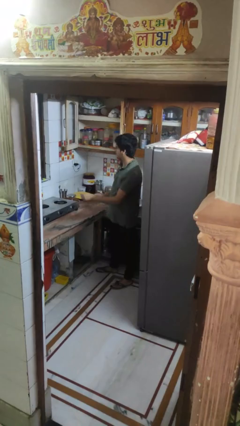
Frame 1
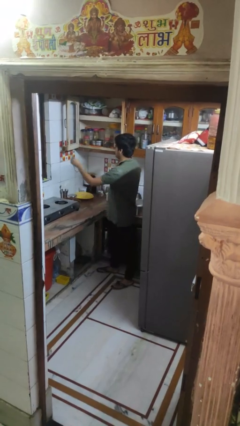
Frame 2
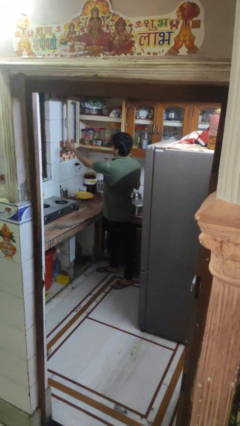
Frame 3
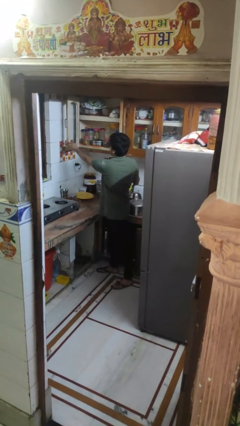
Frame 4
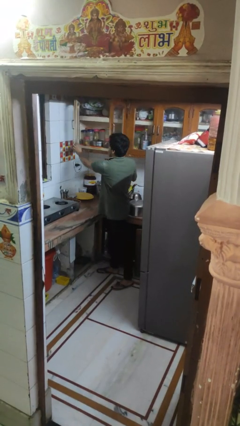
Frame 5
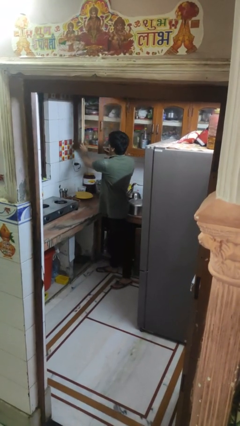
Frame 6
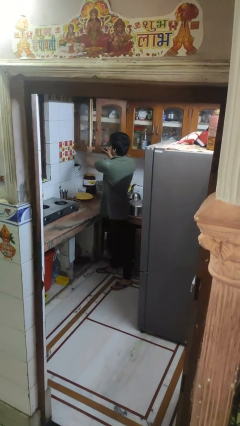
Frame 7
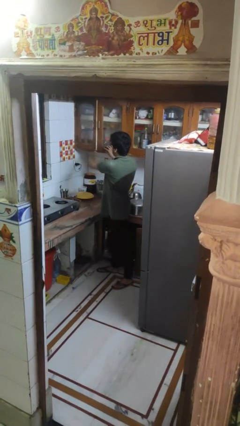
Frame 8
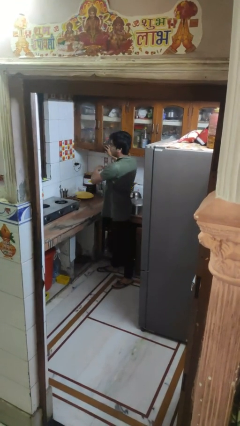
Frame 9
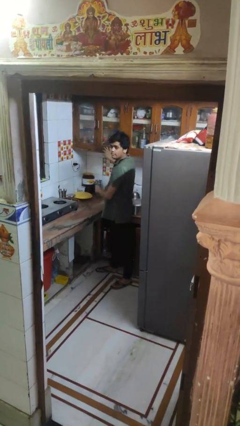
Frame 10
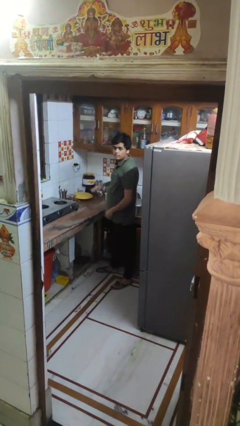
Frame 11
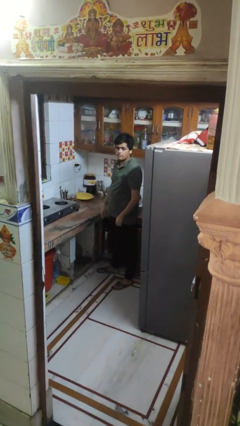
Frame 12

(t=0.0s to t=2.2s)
person closes cabinet

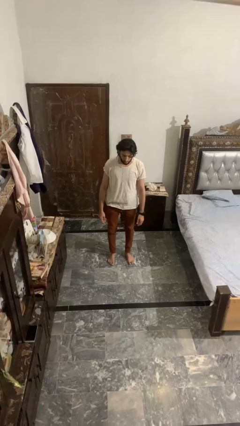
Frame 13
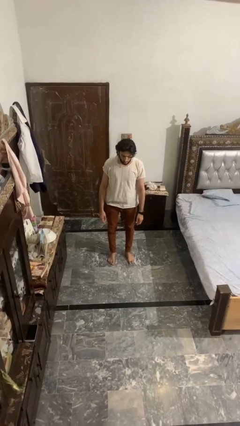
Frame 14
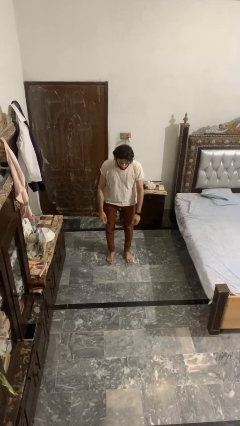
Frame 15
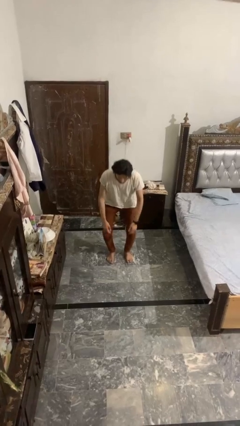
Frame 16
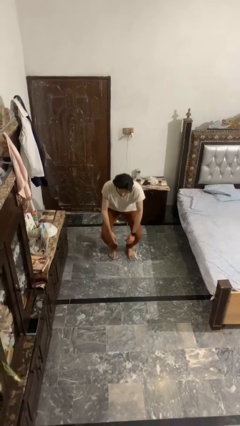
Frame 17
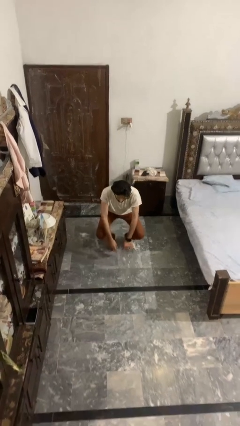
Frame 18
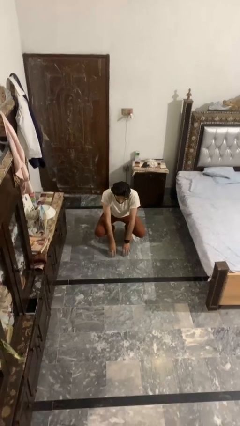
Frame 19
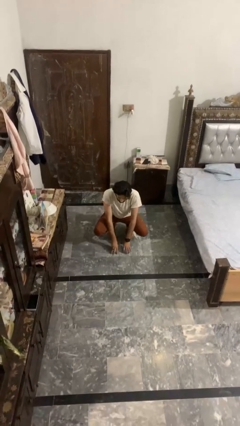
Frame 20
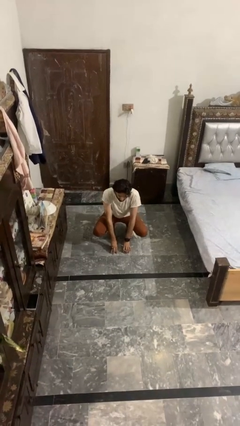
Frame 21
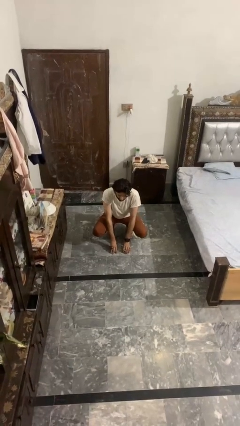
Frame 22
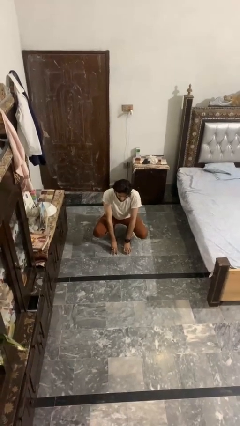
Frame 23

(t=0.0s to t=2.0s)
person squats

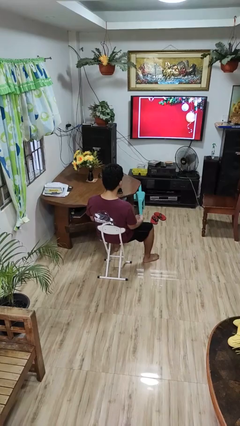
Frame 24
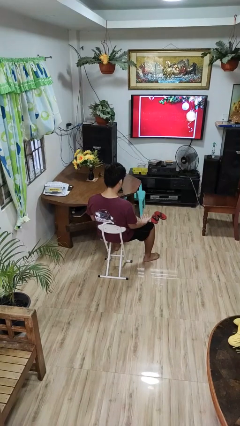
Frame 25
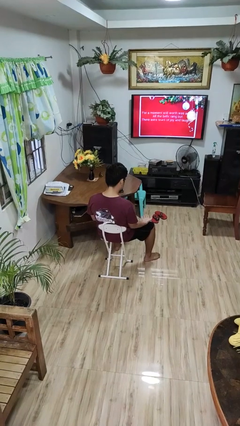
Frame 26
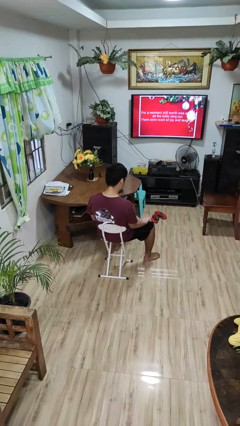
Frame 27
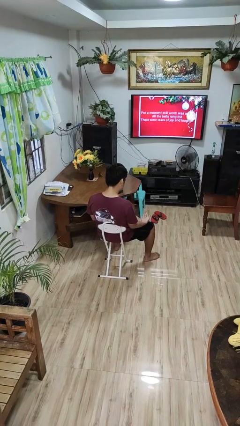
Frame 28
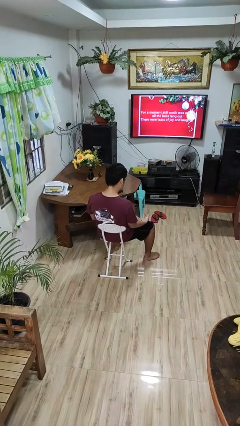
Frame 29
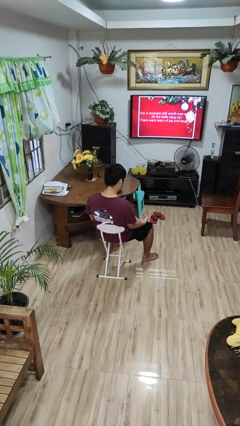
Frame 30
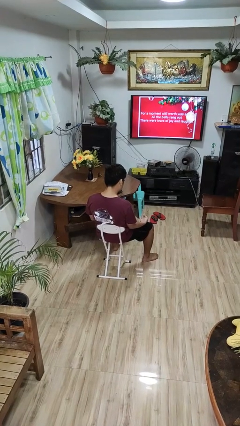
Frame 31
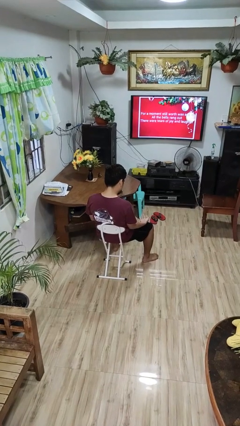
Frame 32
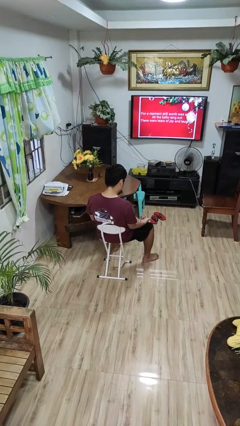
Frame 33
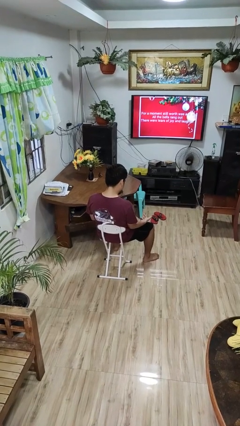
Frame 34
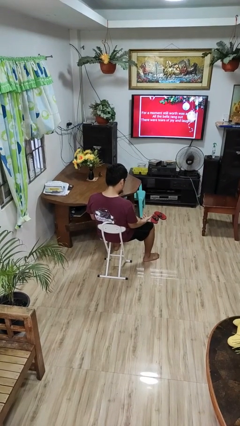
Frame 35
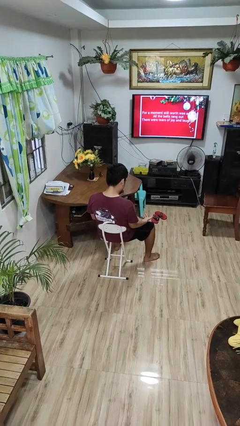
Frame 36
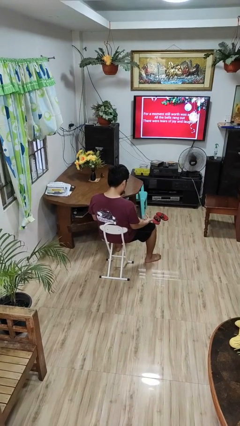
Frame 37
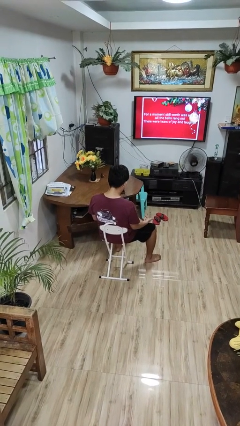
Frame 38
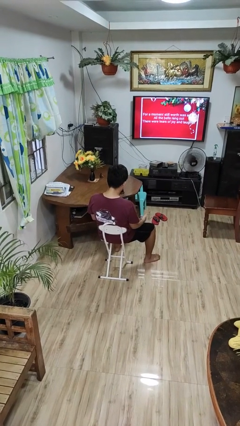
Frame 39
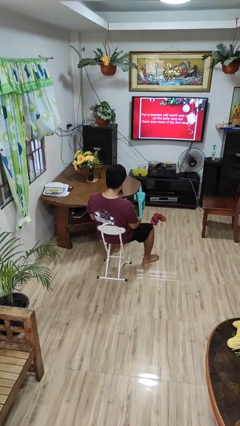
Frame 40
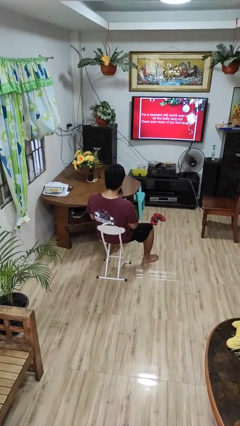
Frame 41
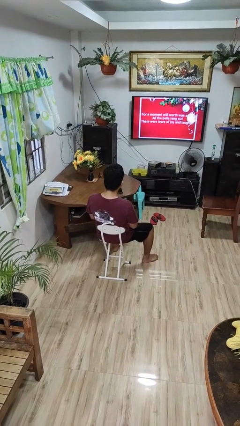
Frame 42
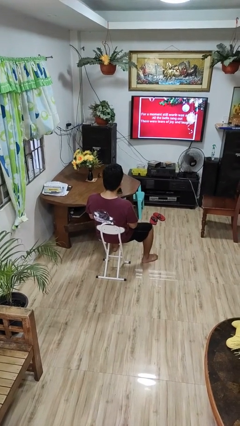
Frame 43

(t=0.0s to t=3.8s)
person looks at hands in lap

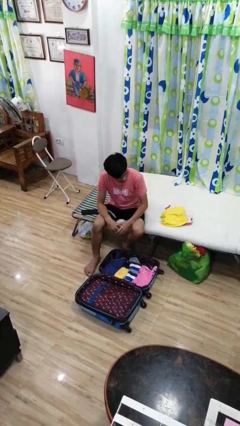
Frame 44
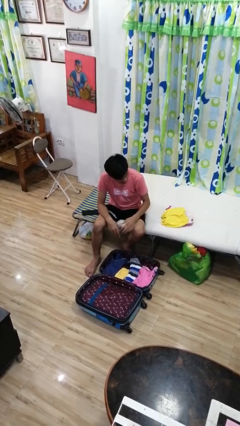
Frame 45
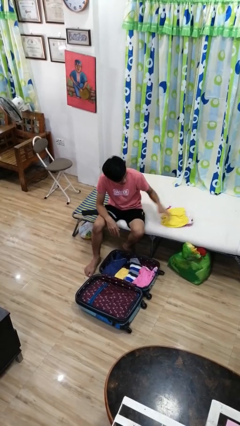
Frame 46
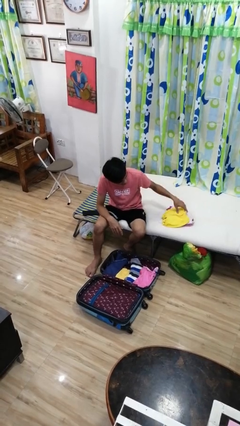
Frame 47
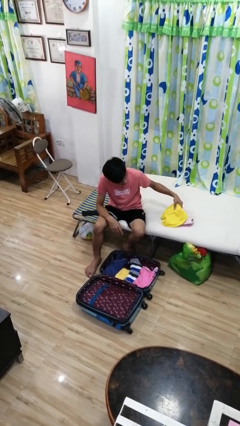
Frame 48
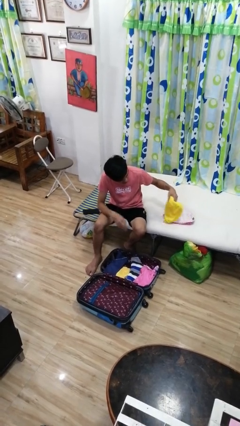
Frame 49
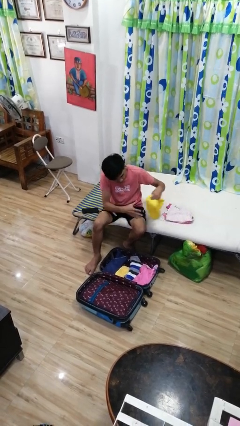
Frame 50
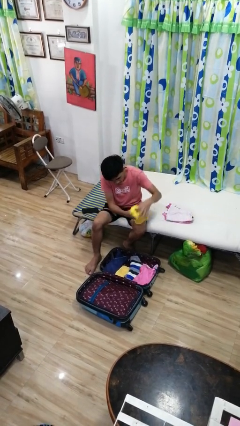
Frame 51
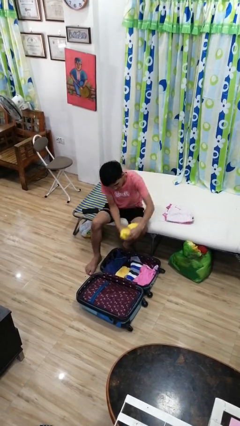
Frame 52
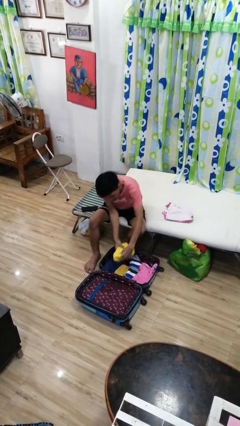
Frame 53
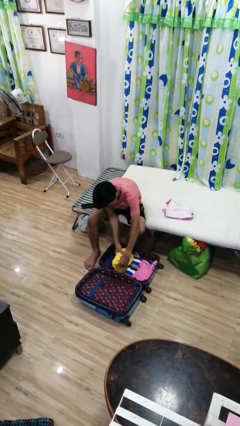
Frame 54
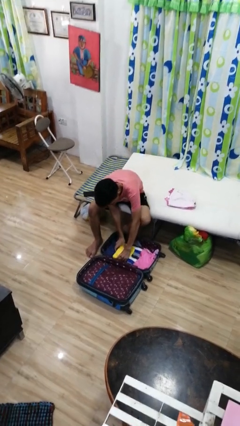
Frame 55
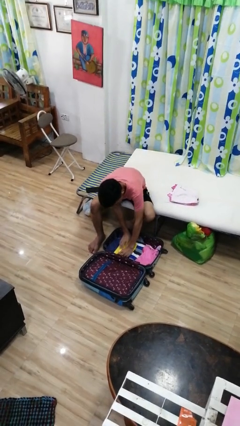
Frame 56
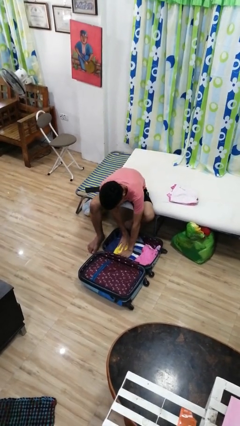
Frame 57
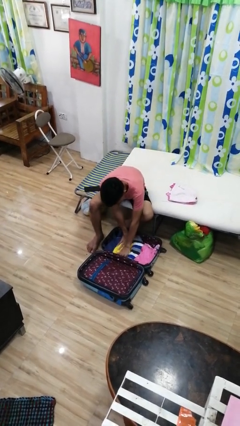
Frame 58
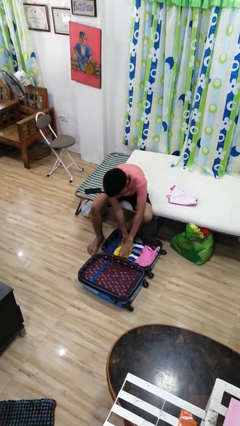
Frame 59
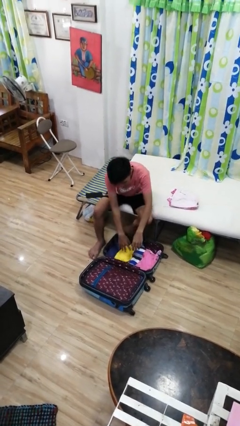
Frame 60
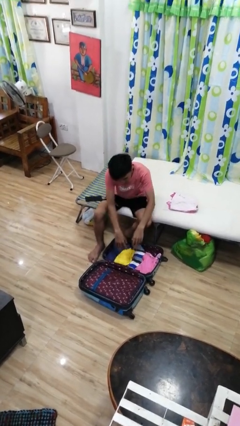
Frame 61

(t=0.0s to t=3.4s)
person loads clothes into suitcase

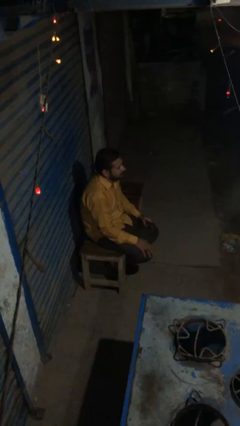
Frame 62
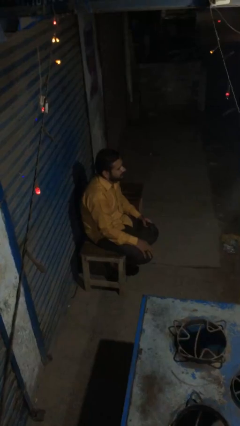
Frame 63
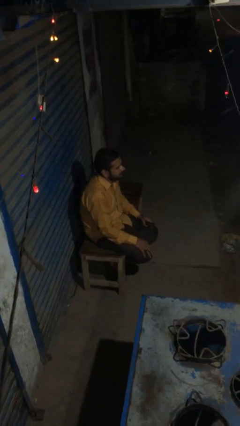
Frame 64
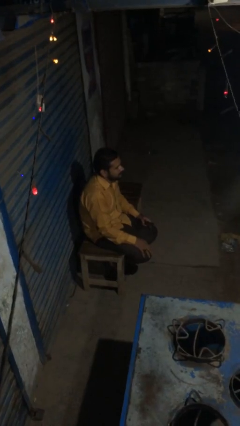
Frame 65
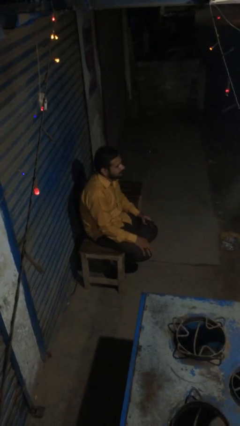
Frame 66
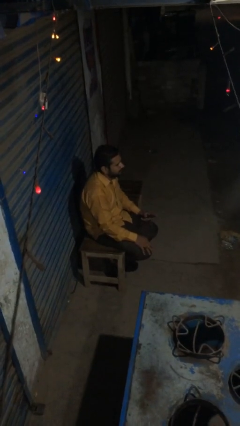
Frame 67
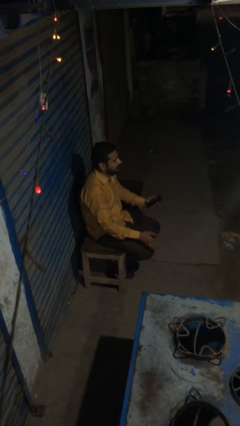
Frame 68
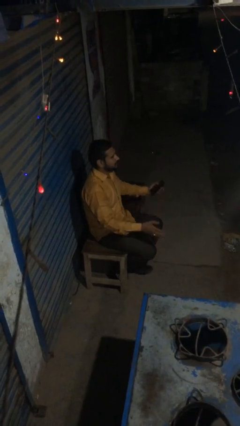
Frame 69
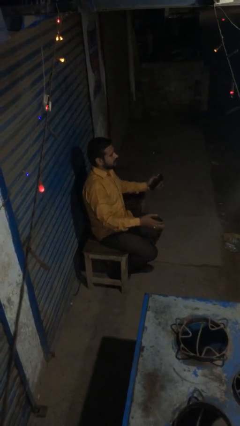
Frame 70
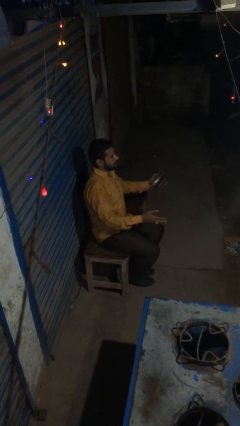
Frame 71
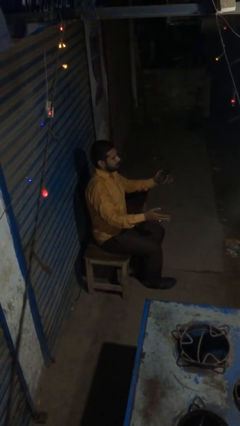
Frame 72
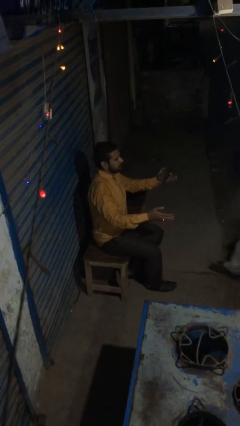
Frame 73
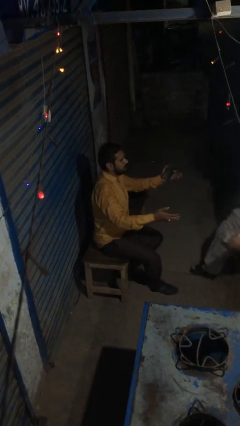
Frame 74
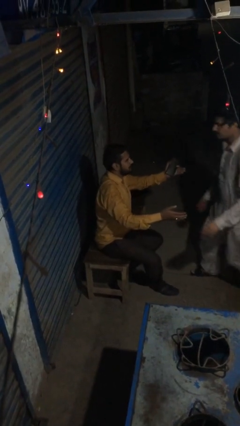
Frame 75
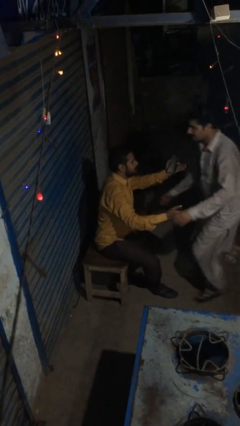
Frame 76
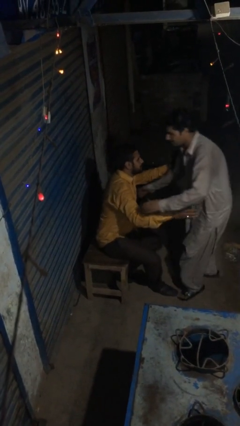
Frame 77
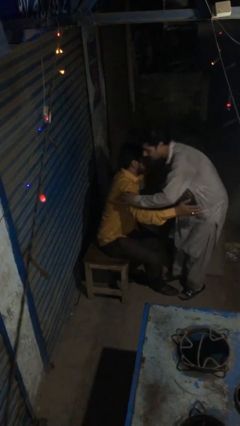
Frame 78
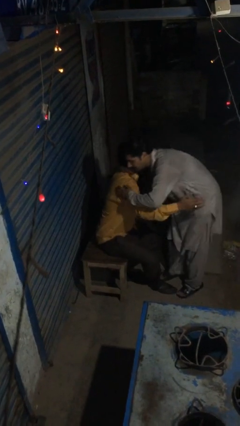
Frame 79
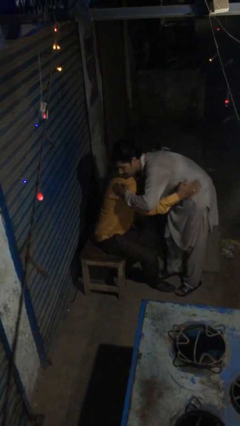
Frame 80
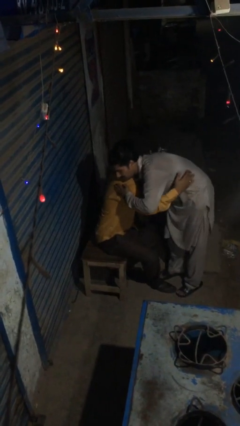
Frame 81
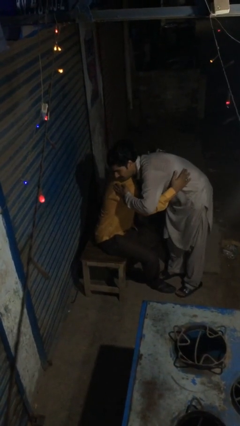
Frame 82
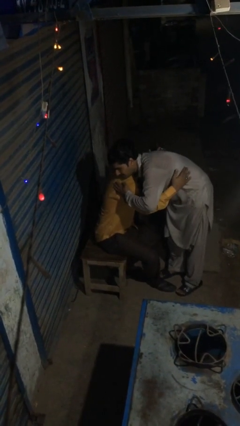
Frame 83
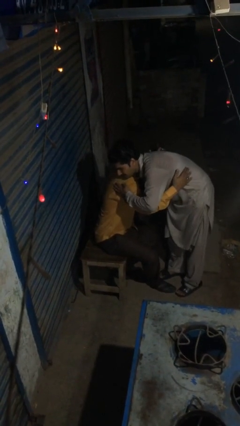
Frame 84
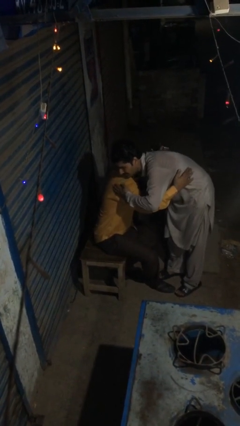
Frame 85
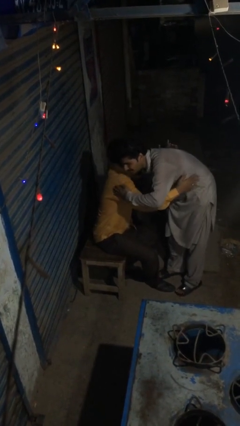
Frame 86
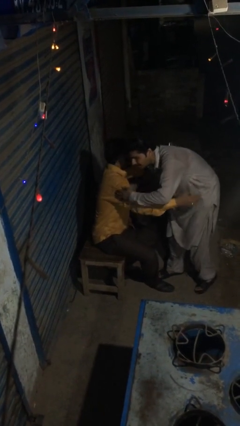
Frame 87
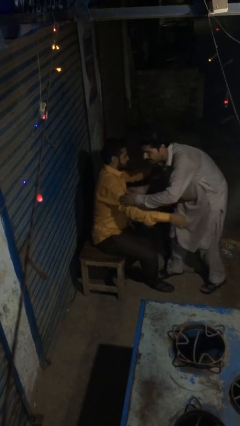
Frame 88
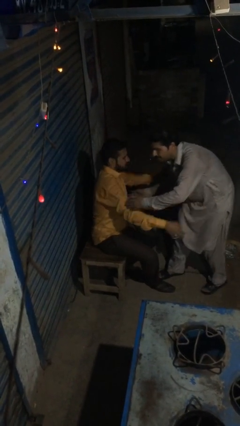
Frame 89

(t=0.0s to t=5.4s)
person embraces person

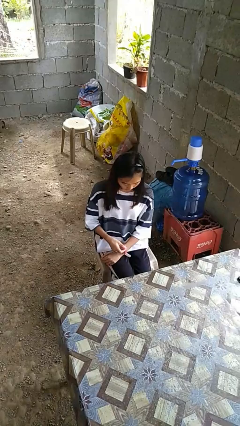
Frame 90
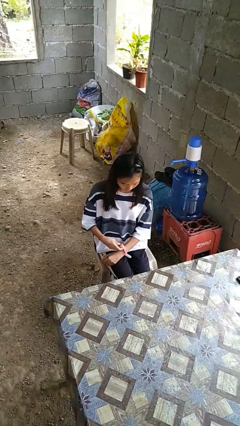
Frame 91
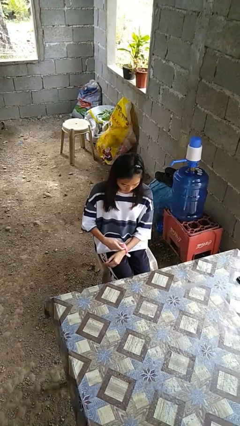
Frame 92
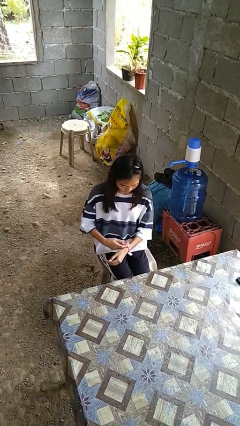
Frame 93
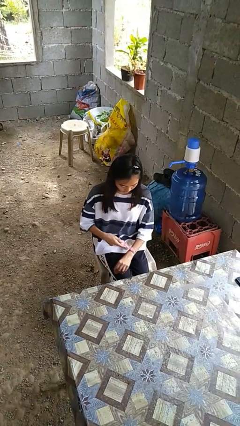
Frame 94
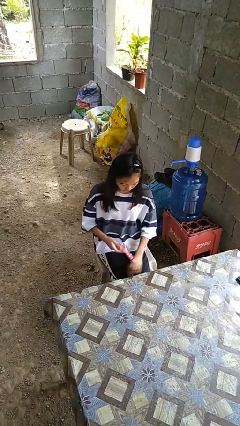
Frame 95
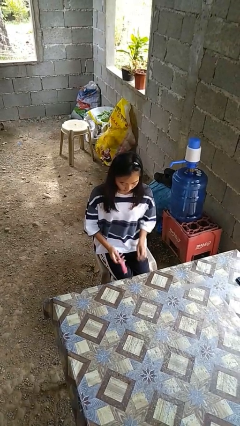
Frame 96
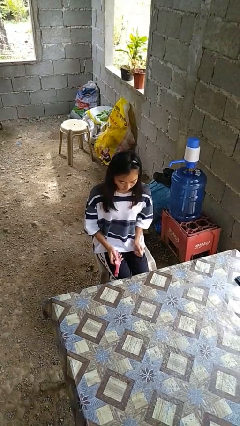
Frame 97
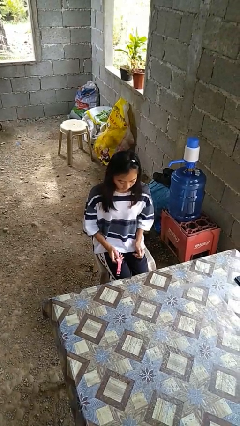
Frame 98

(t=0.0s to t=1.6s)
person takes off wristwatch
